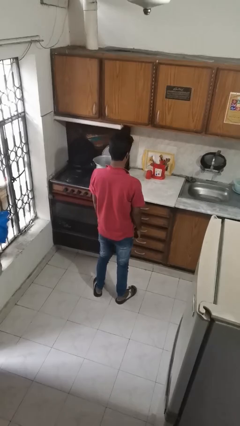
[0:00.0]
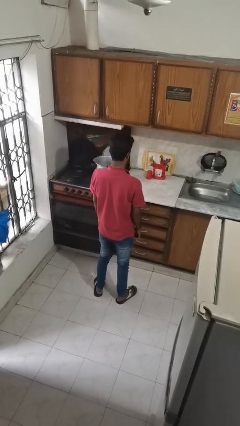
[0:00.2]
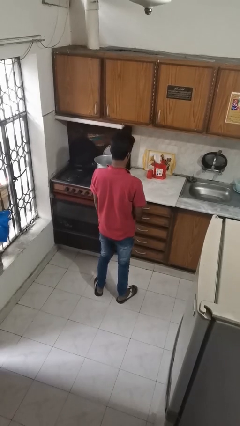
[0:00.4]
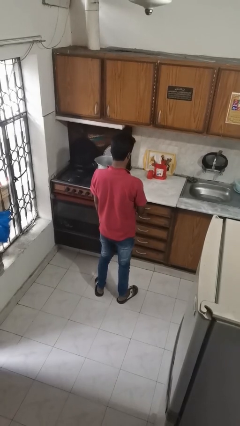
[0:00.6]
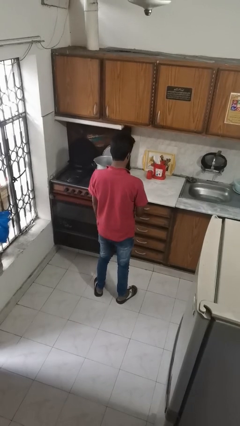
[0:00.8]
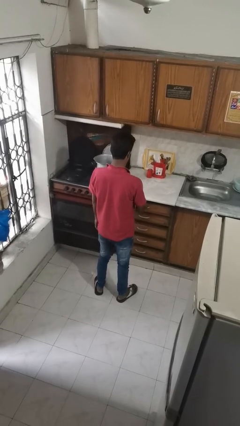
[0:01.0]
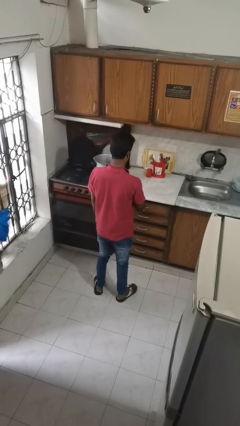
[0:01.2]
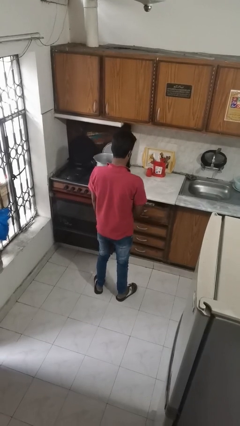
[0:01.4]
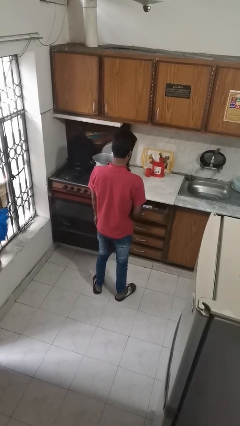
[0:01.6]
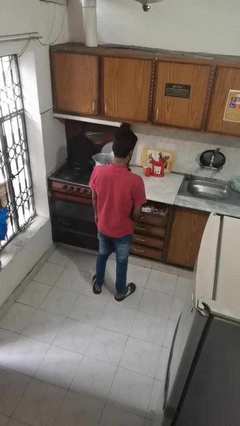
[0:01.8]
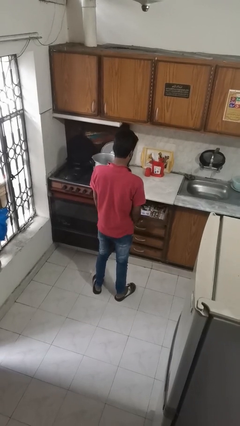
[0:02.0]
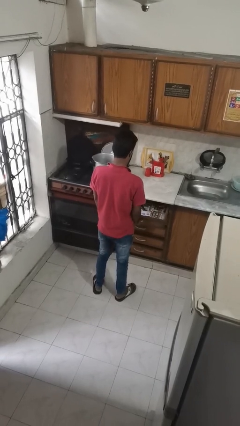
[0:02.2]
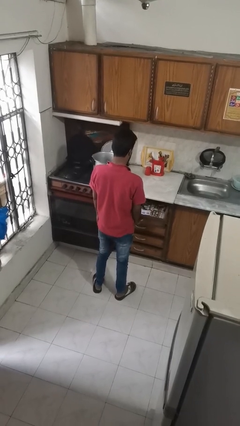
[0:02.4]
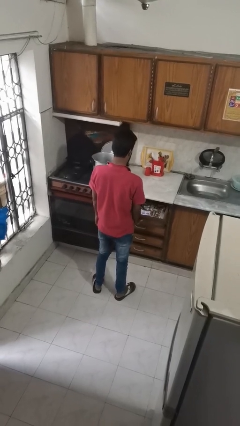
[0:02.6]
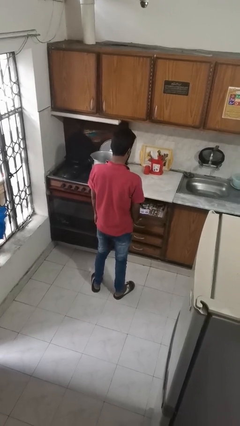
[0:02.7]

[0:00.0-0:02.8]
person opens kitchen drawer

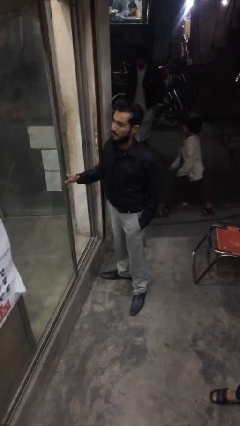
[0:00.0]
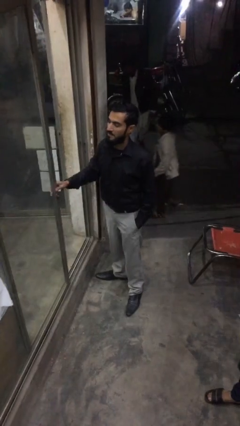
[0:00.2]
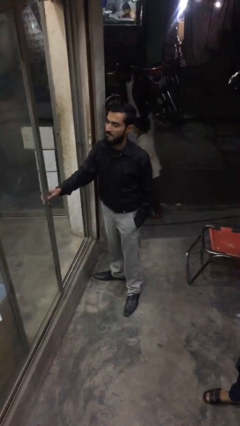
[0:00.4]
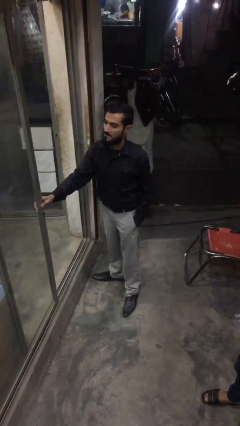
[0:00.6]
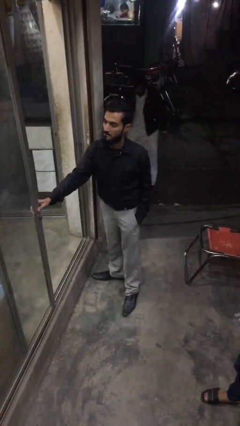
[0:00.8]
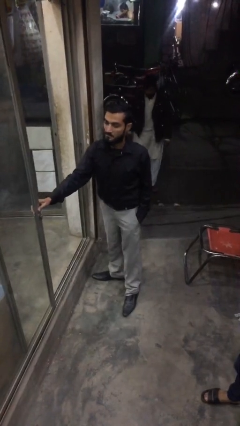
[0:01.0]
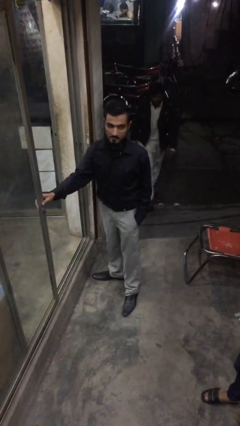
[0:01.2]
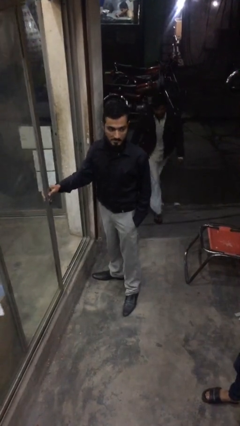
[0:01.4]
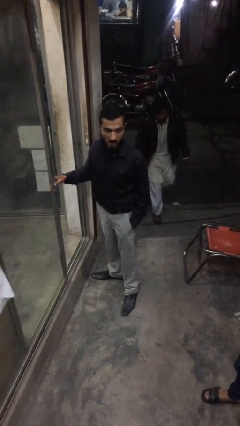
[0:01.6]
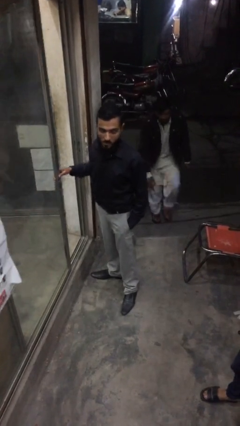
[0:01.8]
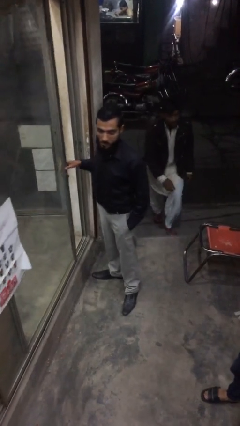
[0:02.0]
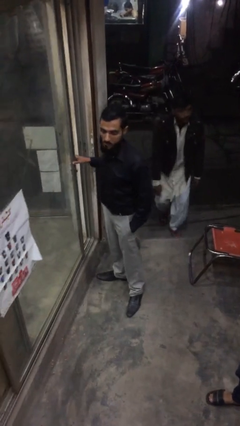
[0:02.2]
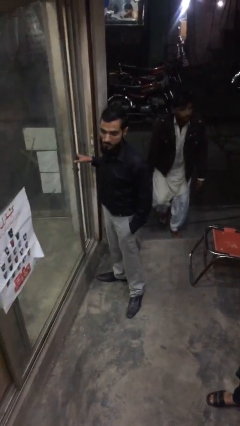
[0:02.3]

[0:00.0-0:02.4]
person closes facility door

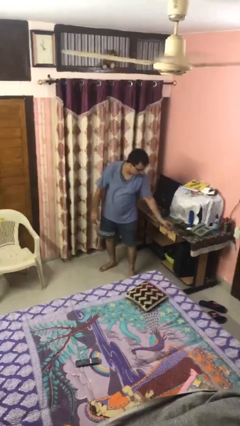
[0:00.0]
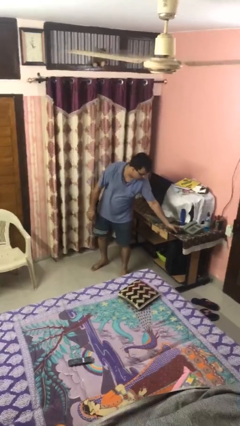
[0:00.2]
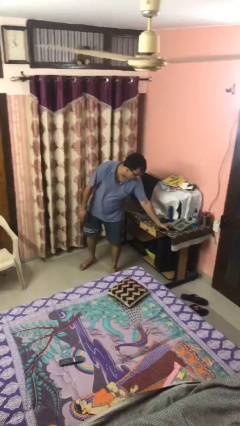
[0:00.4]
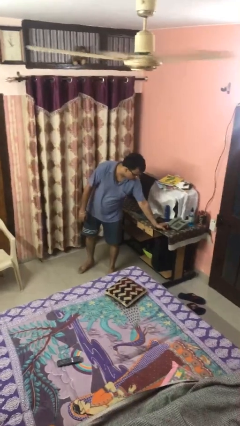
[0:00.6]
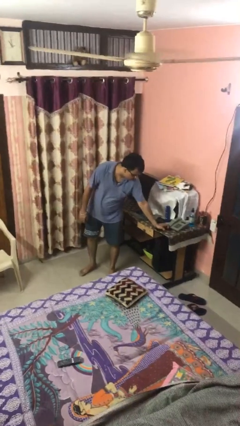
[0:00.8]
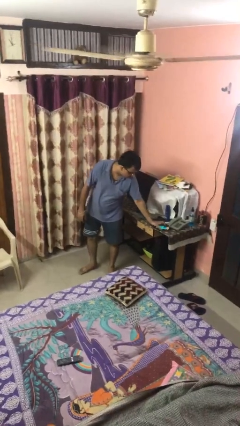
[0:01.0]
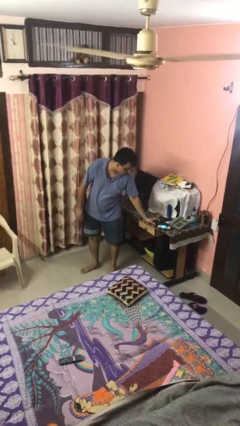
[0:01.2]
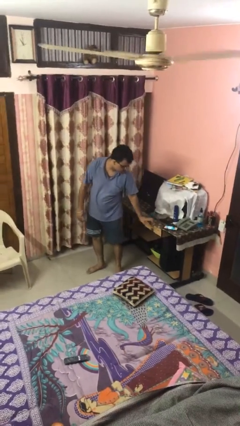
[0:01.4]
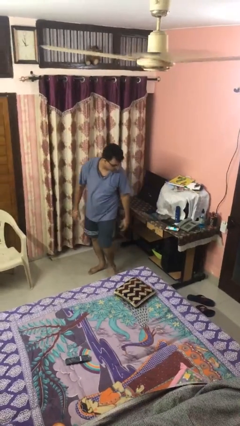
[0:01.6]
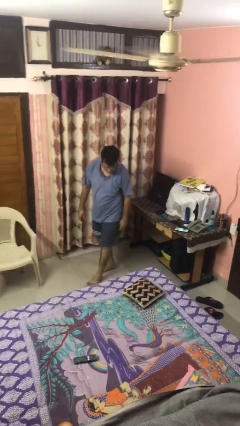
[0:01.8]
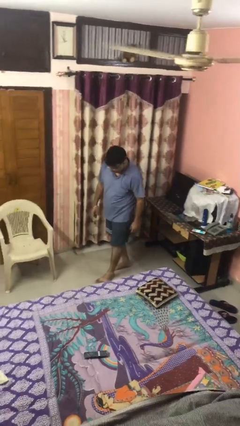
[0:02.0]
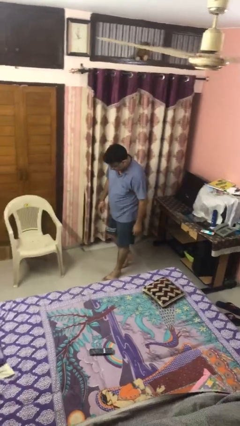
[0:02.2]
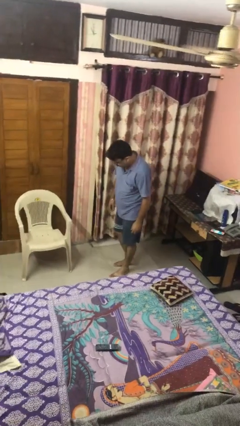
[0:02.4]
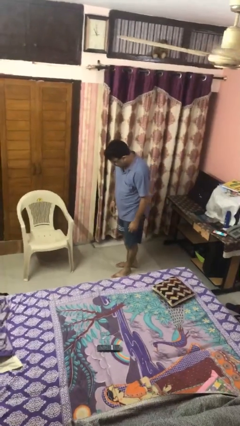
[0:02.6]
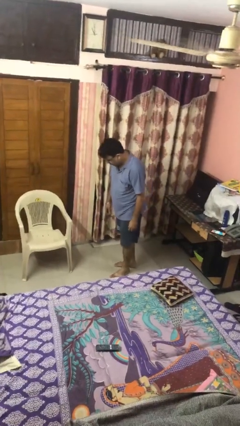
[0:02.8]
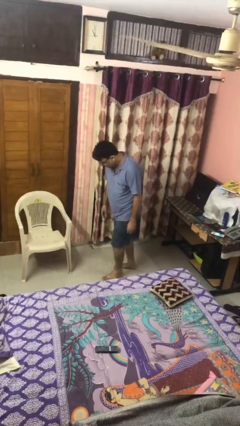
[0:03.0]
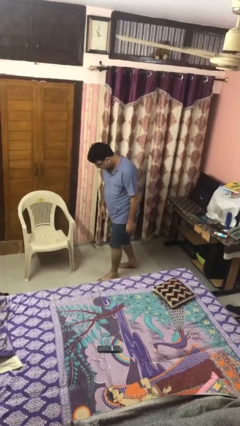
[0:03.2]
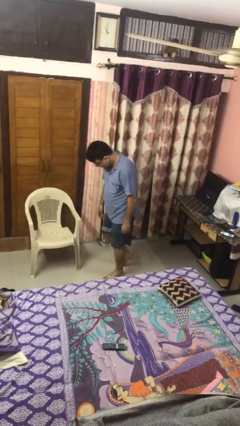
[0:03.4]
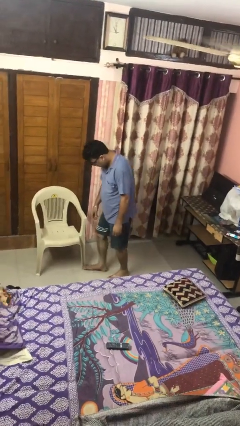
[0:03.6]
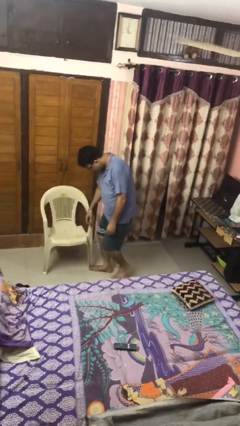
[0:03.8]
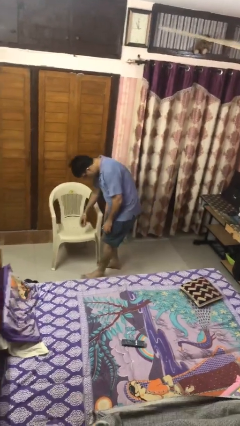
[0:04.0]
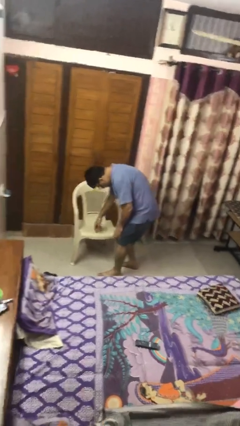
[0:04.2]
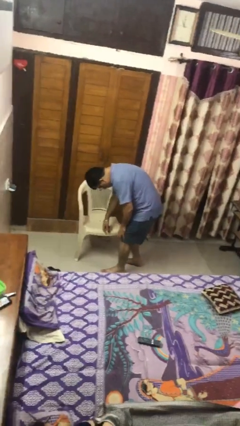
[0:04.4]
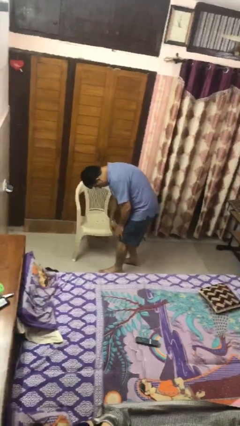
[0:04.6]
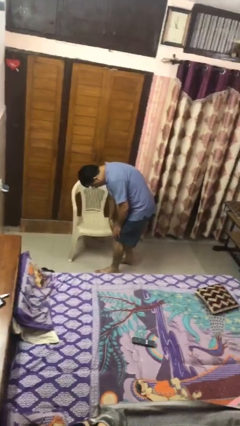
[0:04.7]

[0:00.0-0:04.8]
person stubs toe

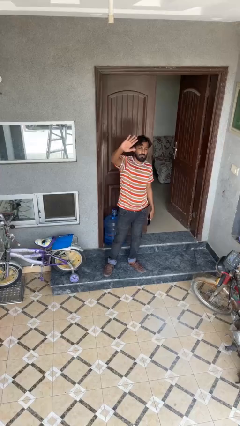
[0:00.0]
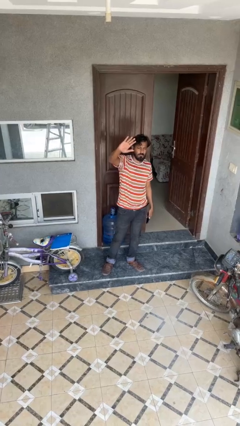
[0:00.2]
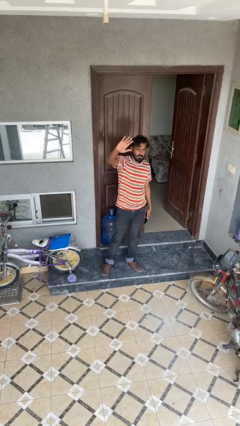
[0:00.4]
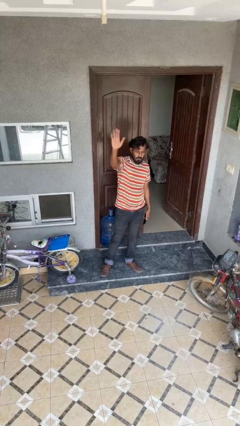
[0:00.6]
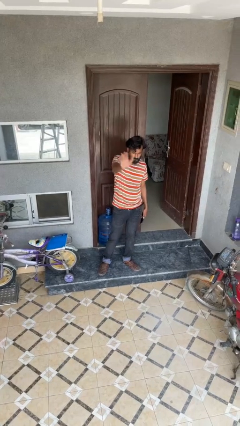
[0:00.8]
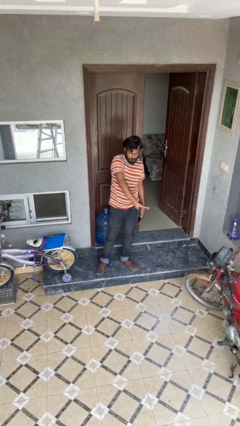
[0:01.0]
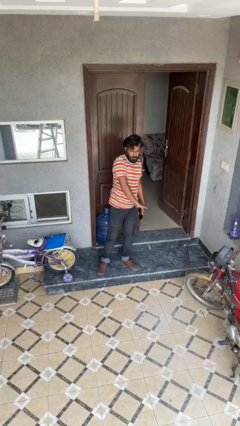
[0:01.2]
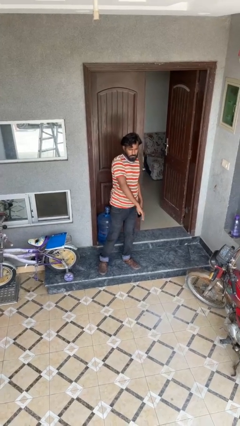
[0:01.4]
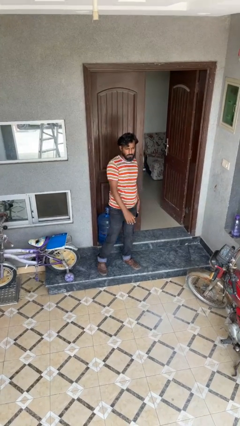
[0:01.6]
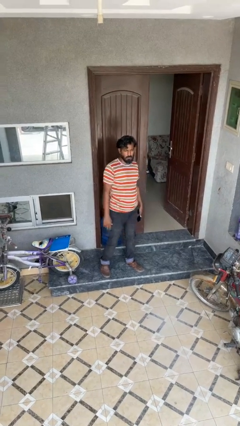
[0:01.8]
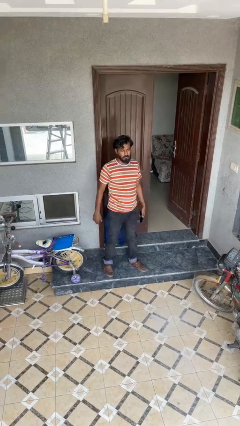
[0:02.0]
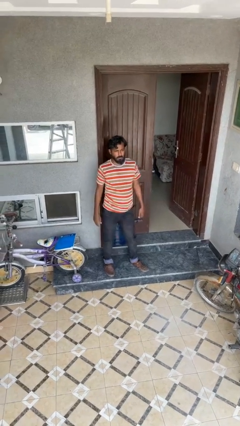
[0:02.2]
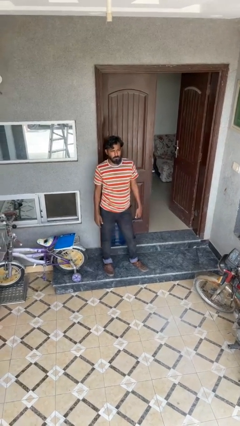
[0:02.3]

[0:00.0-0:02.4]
person gestures swipe down

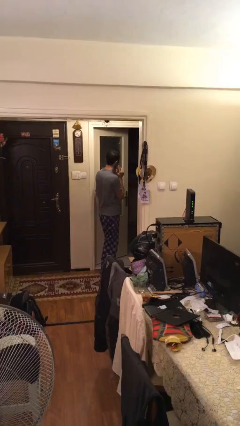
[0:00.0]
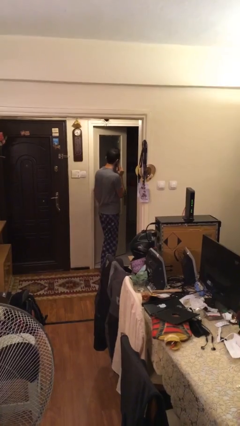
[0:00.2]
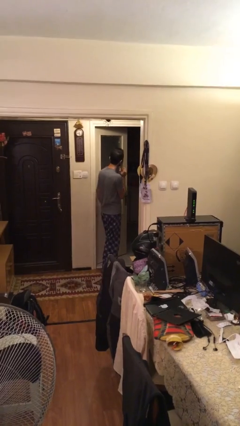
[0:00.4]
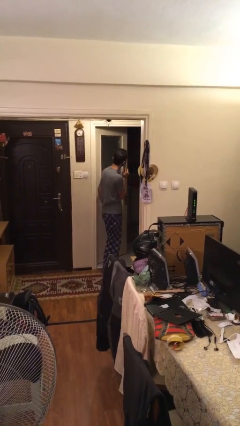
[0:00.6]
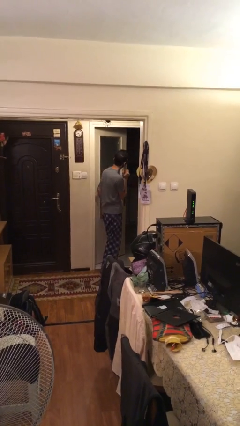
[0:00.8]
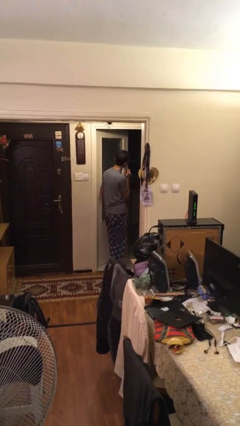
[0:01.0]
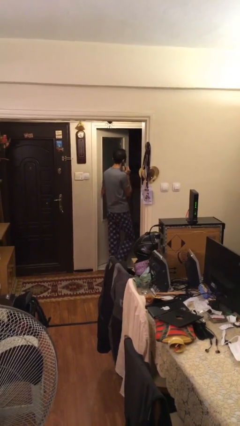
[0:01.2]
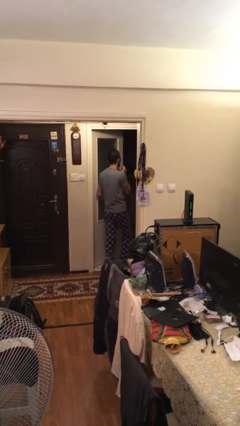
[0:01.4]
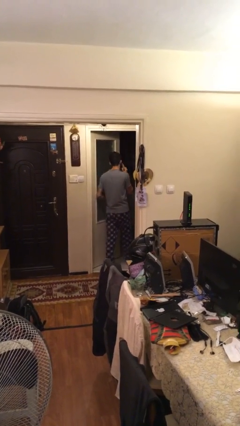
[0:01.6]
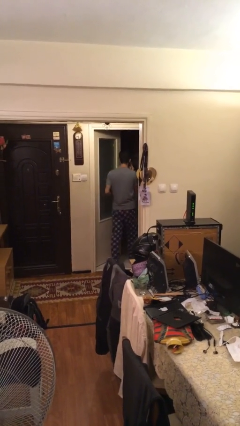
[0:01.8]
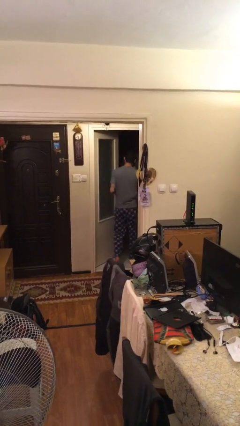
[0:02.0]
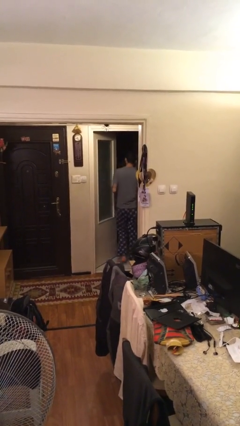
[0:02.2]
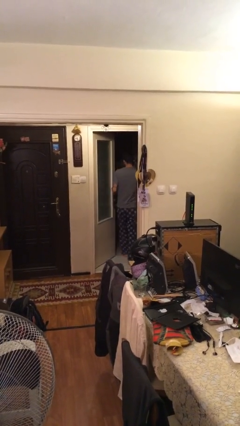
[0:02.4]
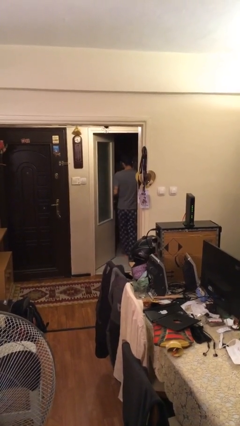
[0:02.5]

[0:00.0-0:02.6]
person exits scene through structure

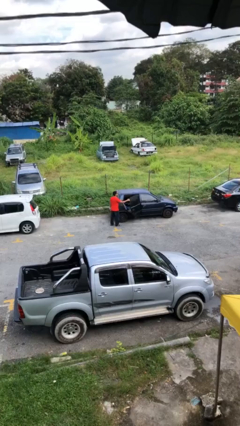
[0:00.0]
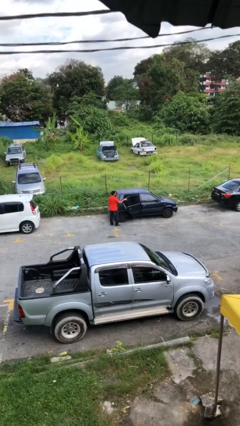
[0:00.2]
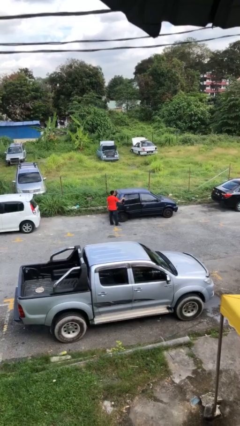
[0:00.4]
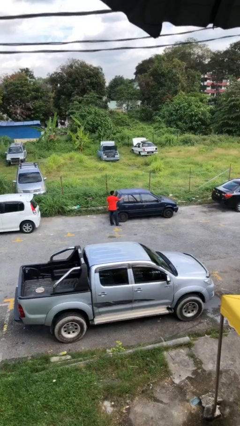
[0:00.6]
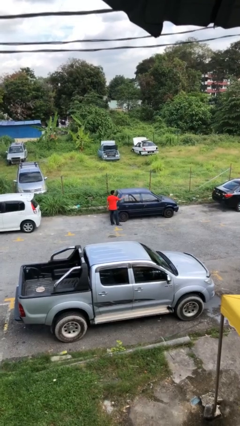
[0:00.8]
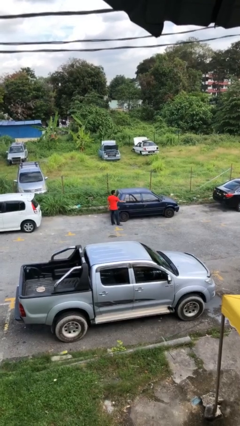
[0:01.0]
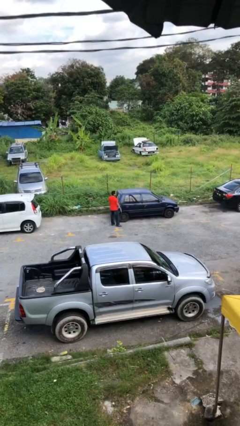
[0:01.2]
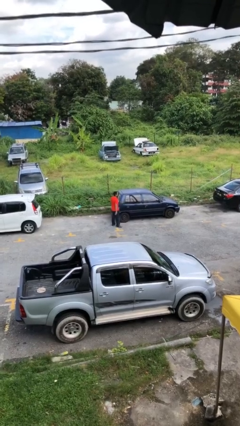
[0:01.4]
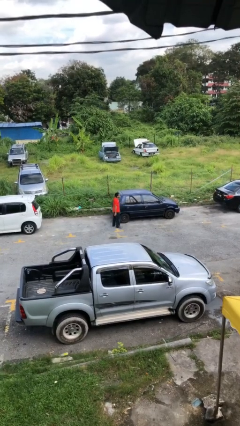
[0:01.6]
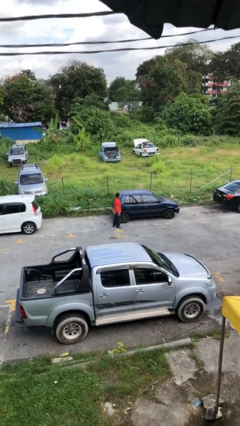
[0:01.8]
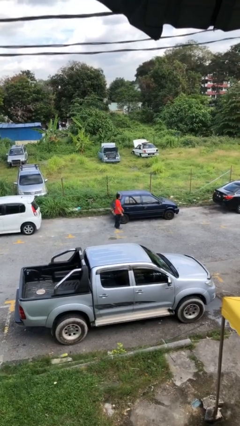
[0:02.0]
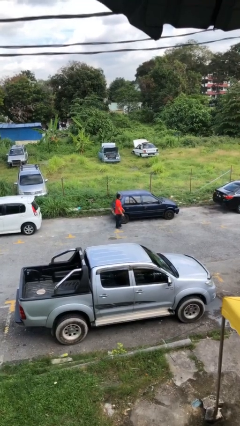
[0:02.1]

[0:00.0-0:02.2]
person closes car door
